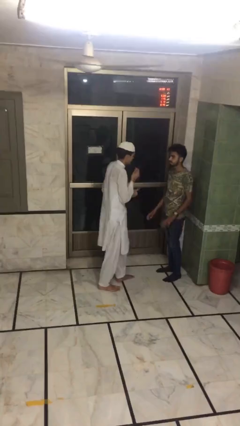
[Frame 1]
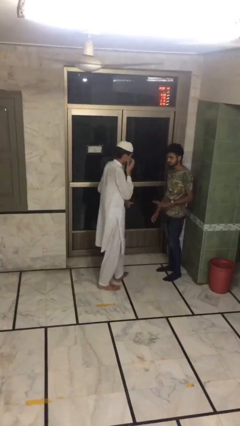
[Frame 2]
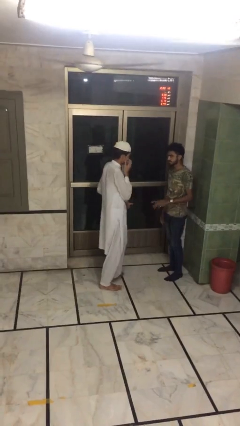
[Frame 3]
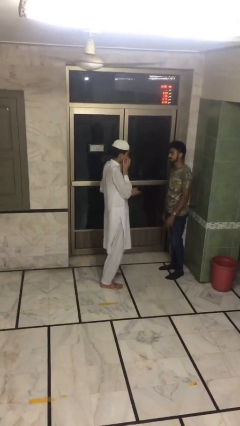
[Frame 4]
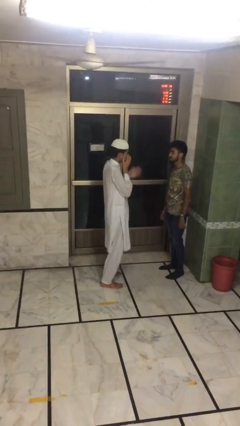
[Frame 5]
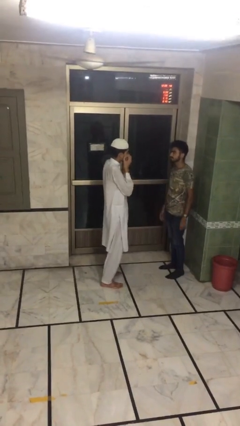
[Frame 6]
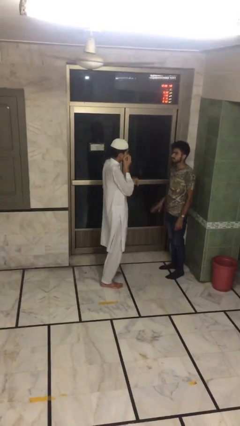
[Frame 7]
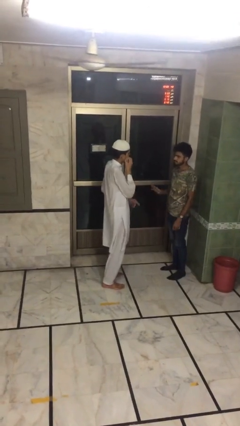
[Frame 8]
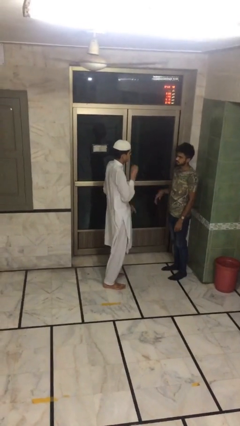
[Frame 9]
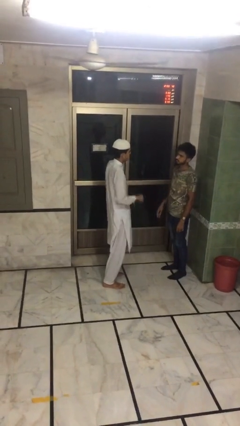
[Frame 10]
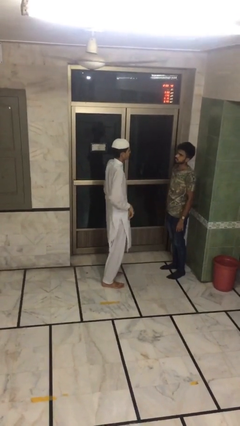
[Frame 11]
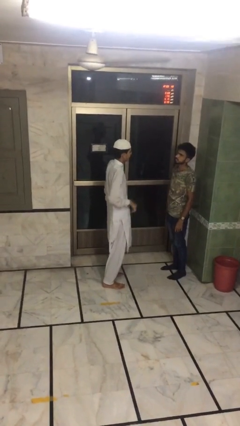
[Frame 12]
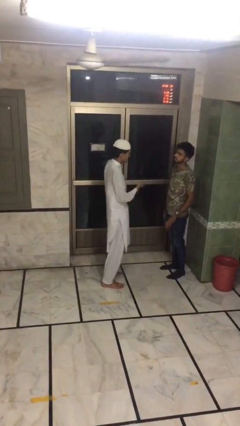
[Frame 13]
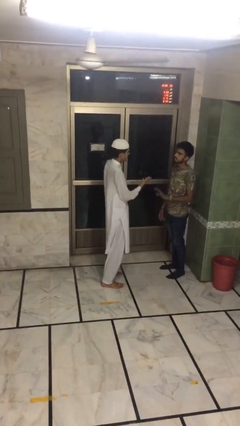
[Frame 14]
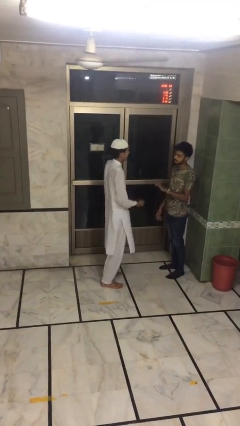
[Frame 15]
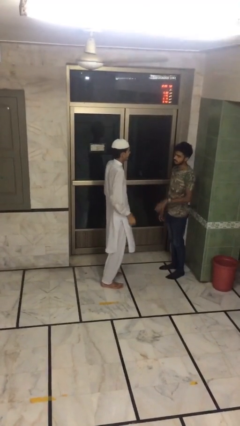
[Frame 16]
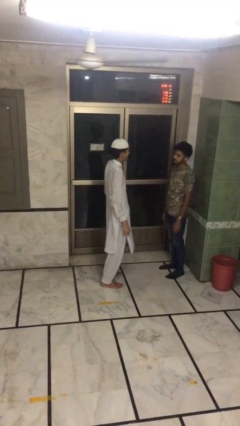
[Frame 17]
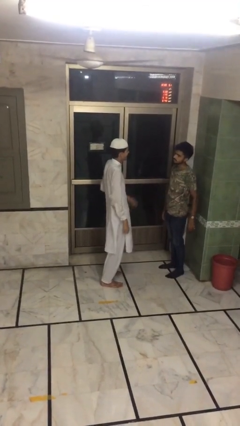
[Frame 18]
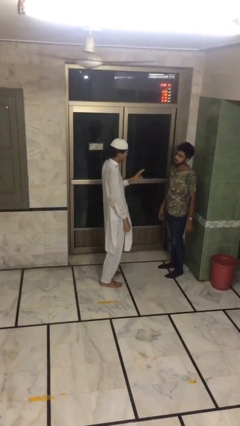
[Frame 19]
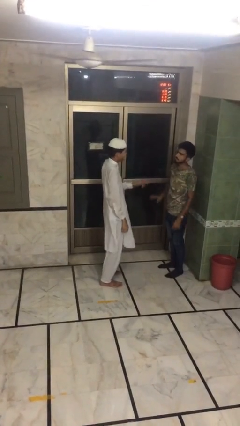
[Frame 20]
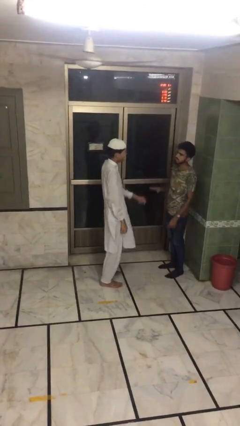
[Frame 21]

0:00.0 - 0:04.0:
person talks to person

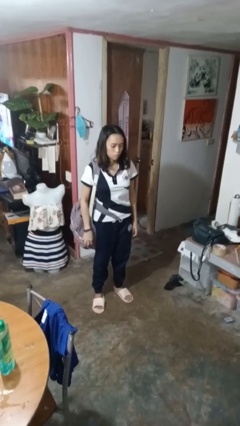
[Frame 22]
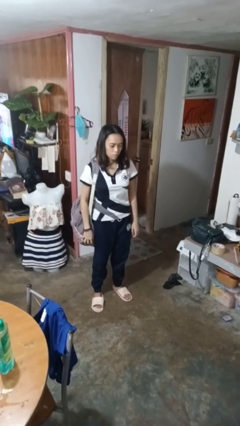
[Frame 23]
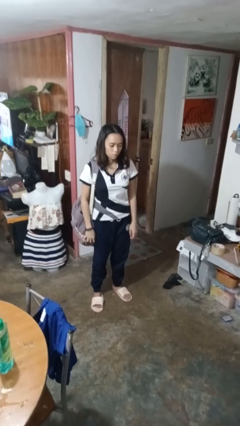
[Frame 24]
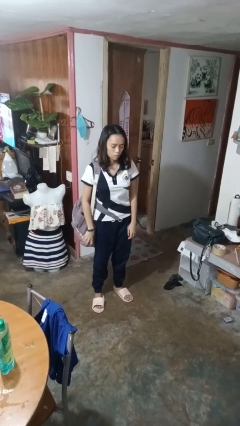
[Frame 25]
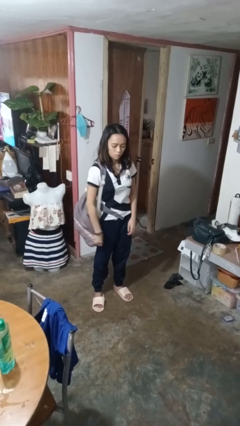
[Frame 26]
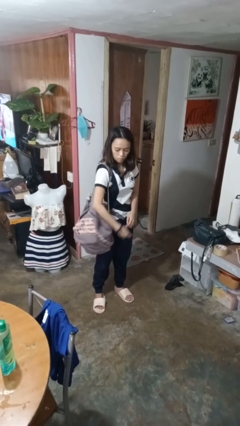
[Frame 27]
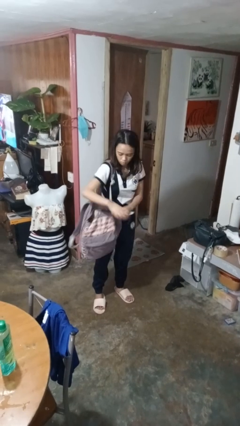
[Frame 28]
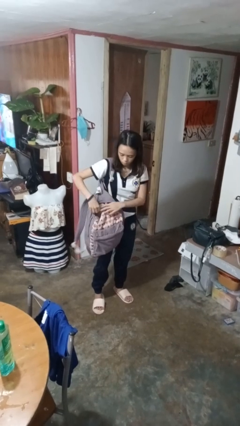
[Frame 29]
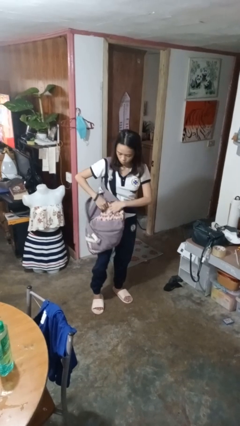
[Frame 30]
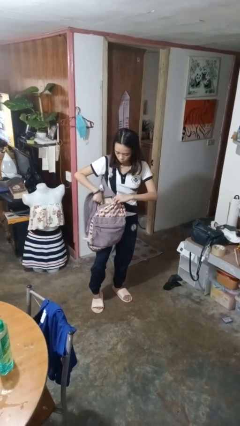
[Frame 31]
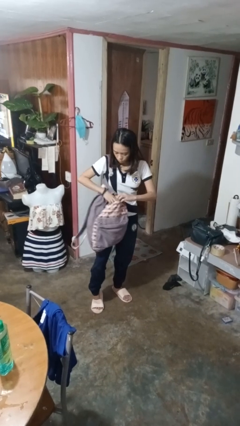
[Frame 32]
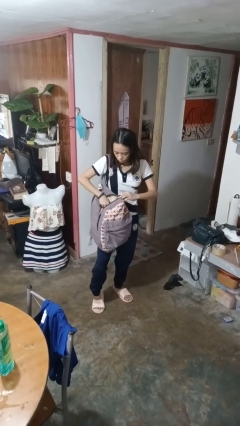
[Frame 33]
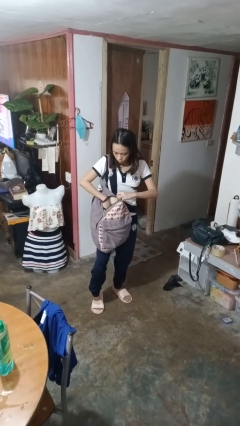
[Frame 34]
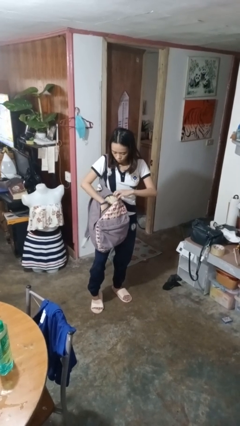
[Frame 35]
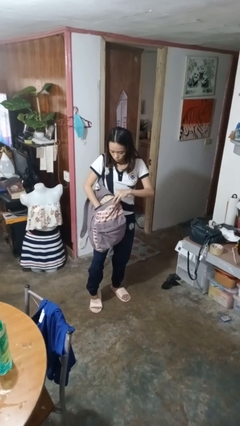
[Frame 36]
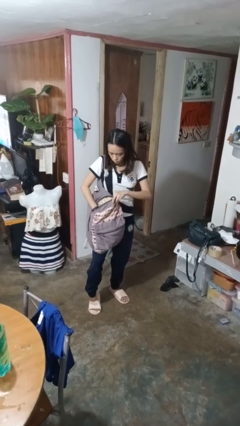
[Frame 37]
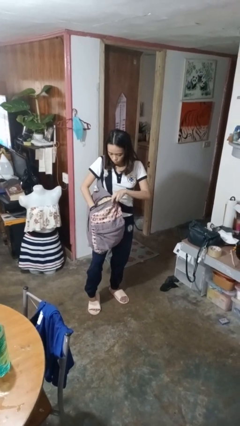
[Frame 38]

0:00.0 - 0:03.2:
person searches in backpack

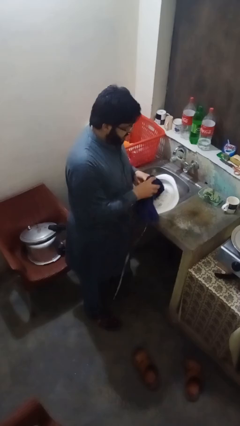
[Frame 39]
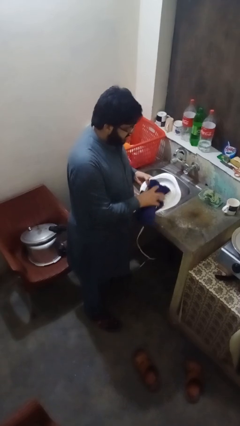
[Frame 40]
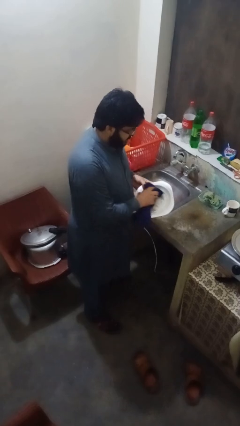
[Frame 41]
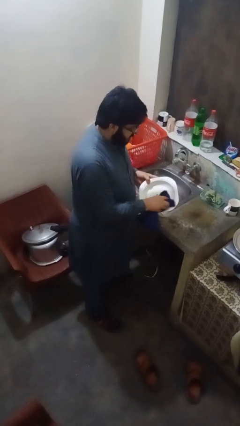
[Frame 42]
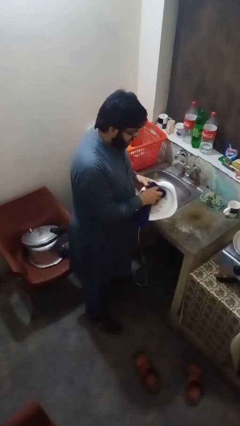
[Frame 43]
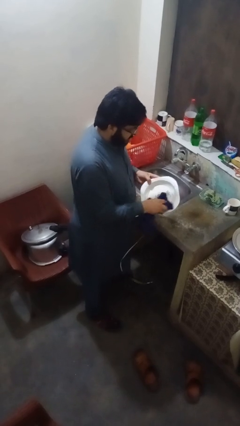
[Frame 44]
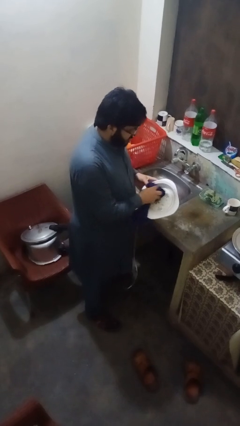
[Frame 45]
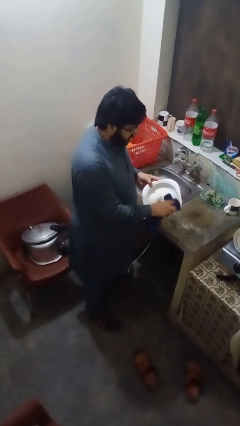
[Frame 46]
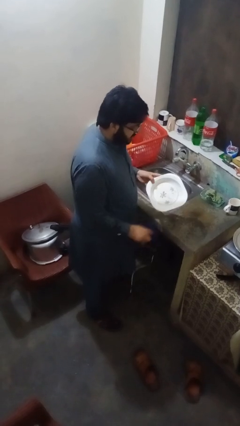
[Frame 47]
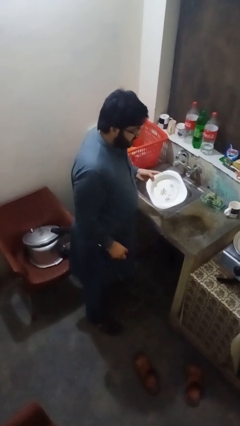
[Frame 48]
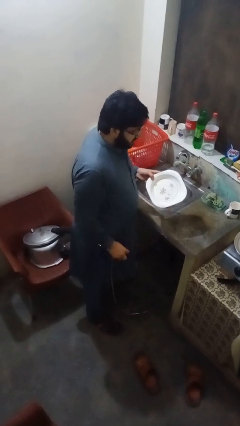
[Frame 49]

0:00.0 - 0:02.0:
person dries dish

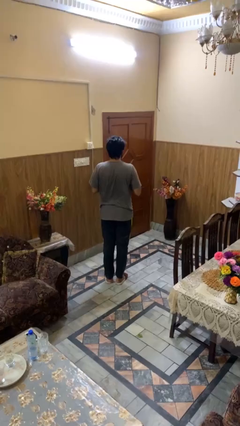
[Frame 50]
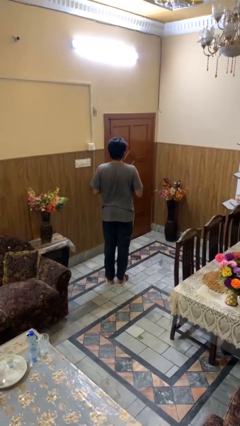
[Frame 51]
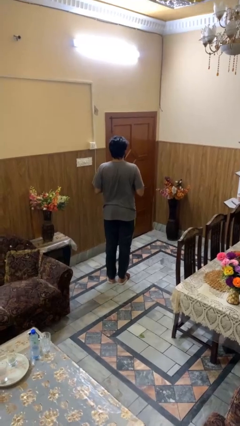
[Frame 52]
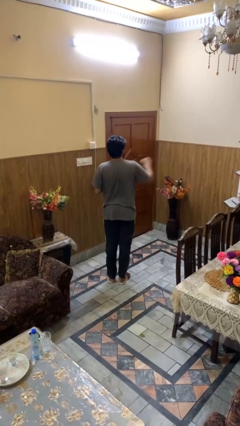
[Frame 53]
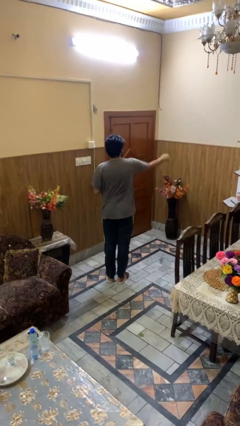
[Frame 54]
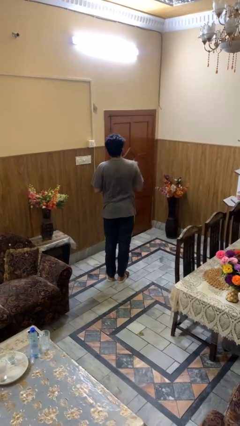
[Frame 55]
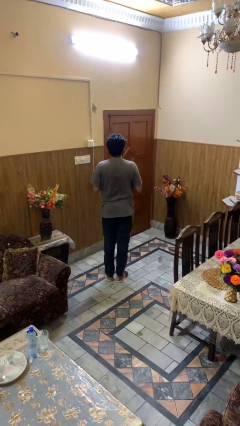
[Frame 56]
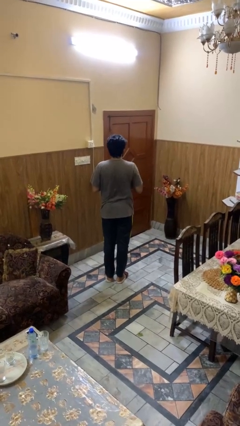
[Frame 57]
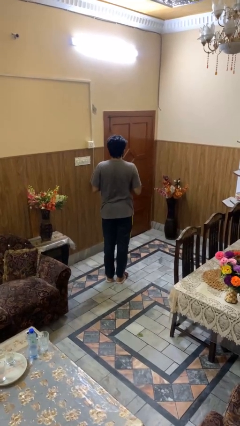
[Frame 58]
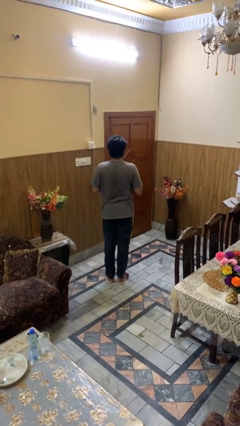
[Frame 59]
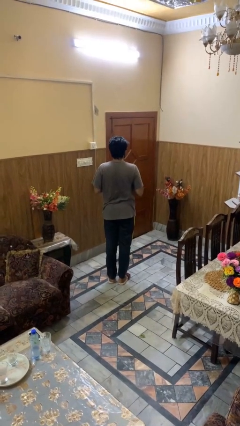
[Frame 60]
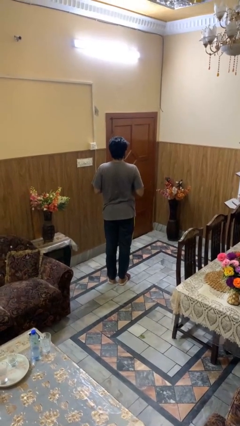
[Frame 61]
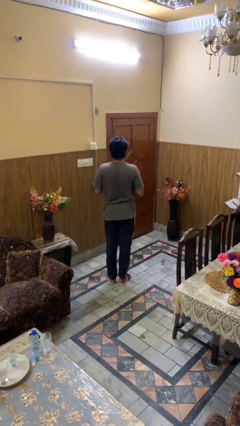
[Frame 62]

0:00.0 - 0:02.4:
person karate chop

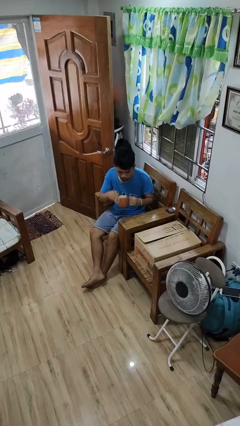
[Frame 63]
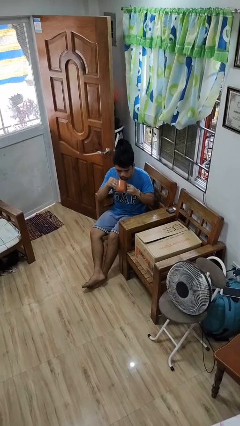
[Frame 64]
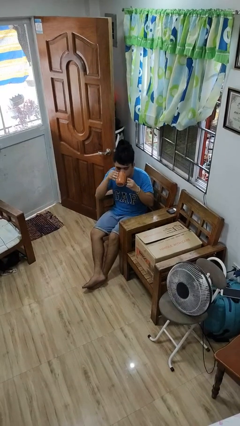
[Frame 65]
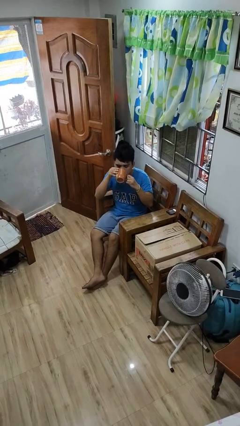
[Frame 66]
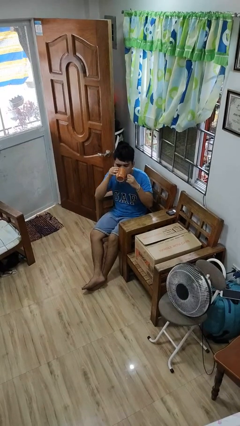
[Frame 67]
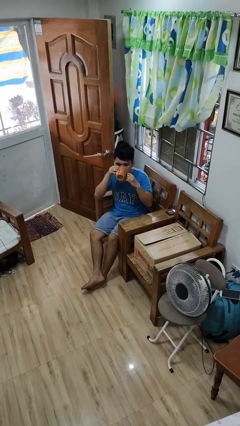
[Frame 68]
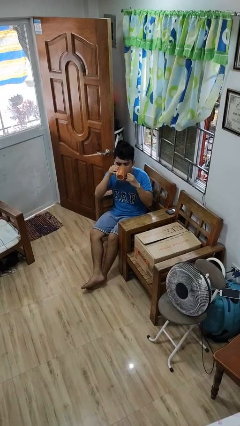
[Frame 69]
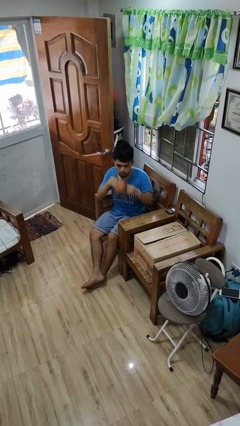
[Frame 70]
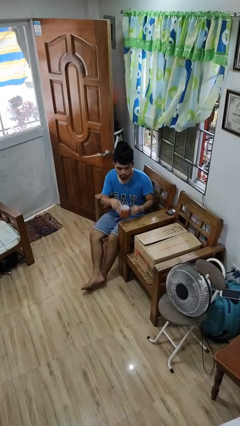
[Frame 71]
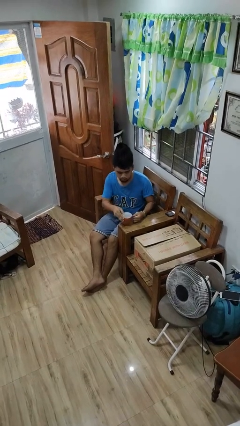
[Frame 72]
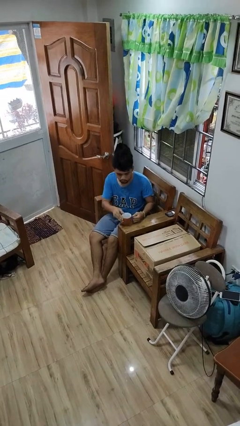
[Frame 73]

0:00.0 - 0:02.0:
person drinks from mug

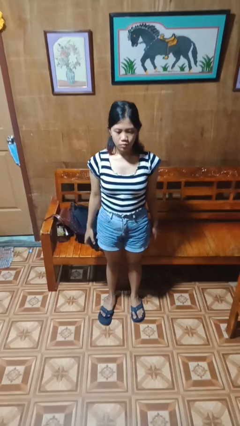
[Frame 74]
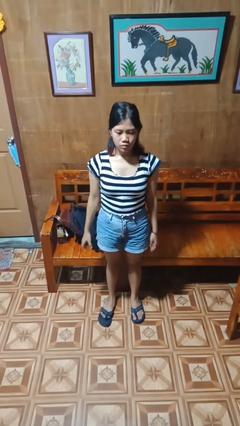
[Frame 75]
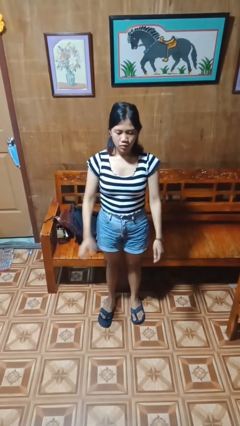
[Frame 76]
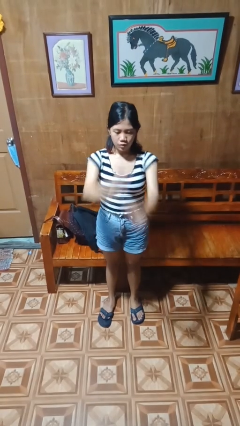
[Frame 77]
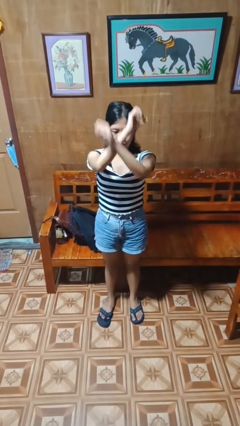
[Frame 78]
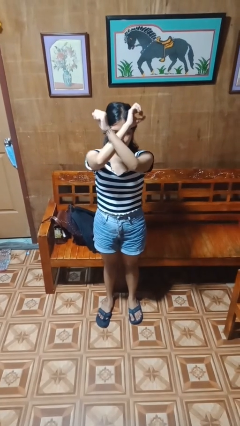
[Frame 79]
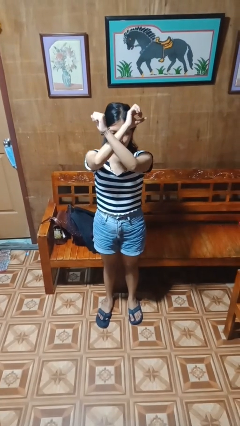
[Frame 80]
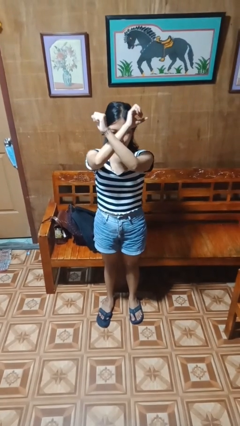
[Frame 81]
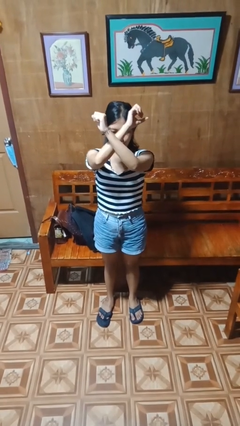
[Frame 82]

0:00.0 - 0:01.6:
person gestures arms x

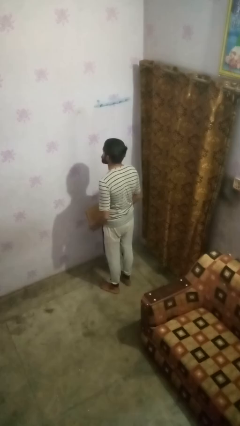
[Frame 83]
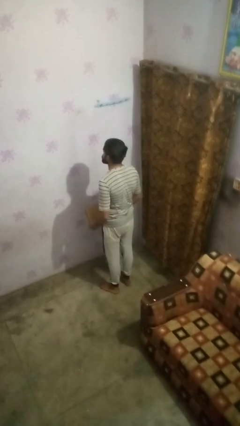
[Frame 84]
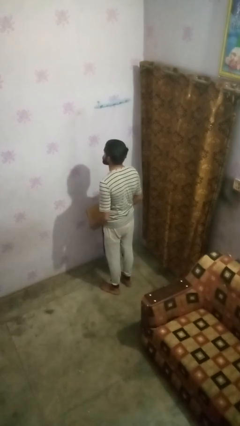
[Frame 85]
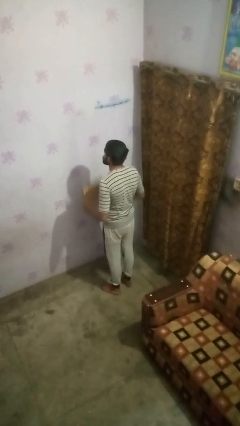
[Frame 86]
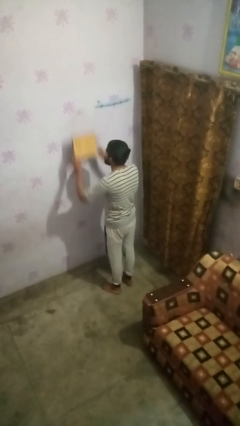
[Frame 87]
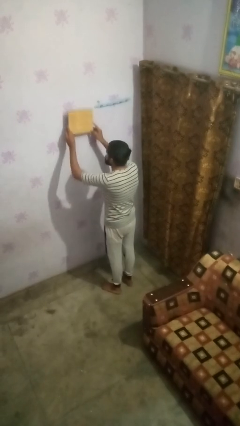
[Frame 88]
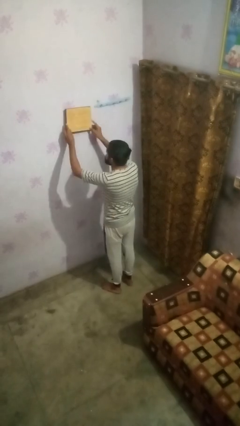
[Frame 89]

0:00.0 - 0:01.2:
person puts up picture frame

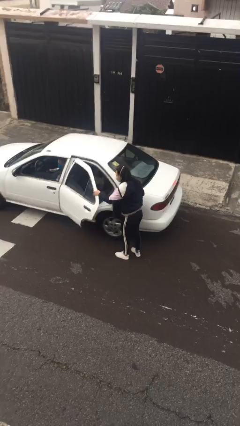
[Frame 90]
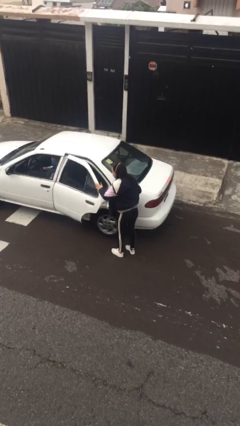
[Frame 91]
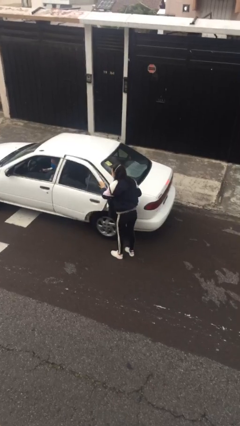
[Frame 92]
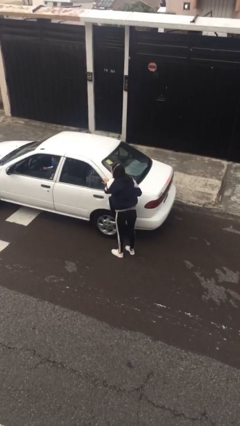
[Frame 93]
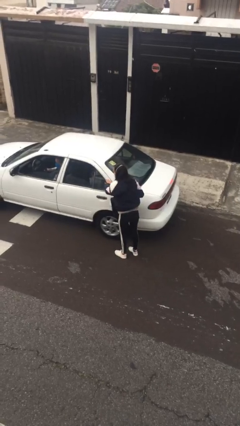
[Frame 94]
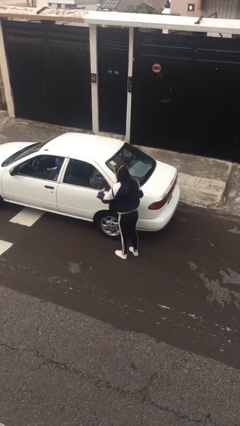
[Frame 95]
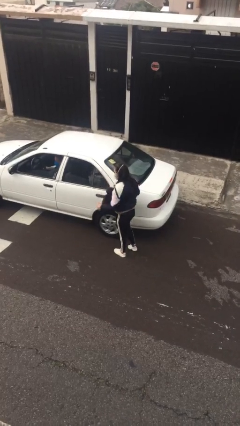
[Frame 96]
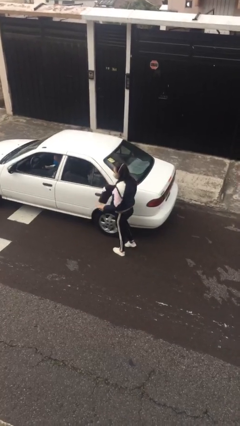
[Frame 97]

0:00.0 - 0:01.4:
person closes car door
